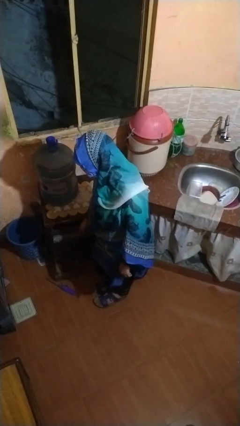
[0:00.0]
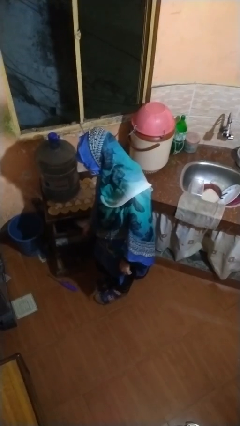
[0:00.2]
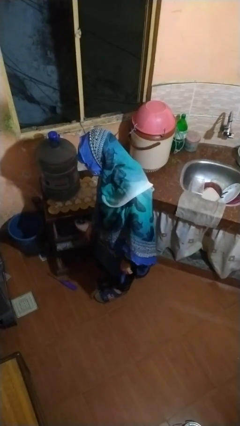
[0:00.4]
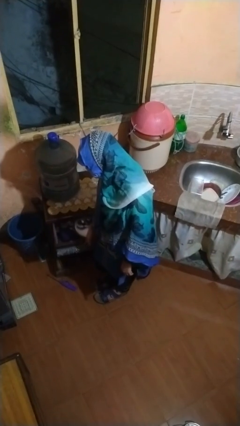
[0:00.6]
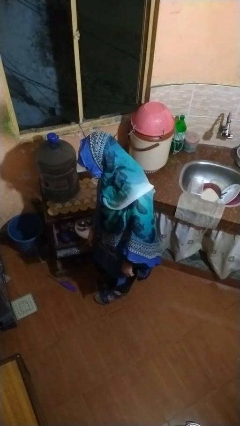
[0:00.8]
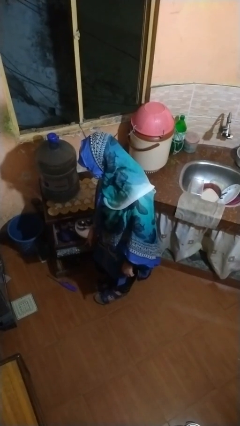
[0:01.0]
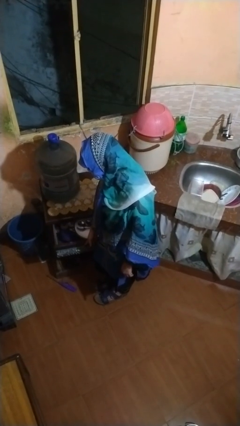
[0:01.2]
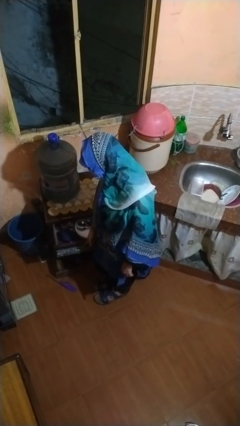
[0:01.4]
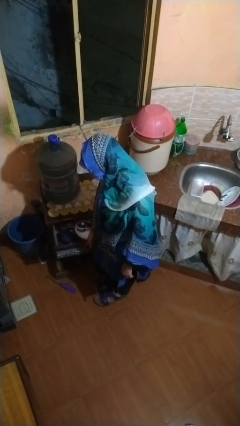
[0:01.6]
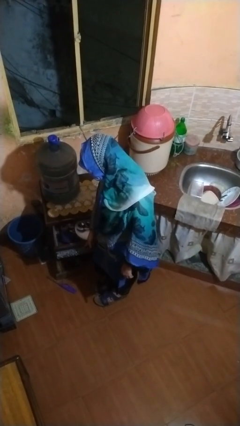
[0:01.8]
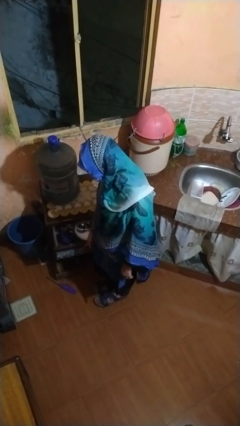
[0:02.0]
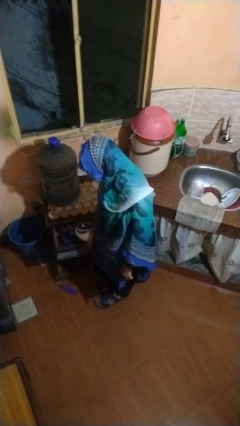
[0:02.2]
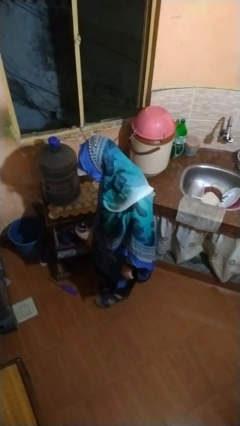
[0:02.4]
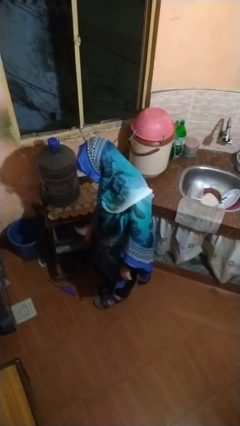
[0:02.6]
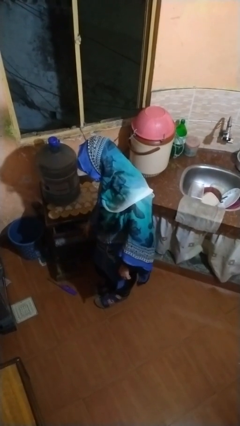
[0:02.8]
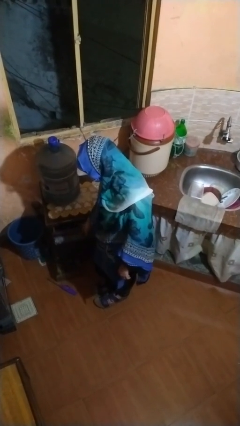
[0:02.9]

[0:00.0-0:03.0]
person opens kitchen drawer

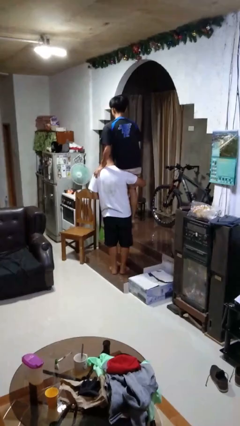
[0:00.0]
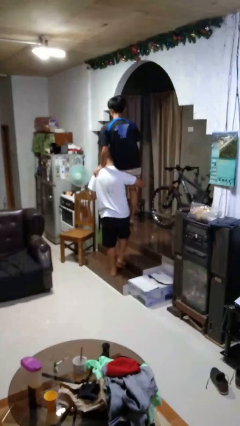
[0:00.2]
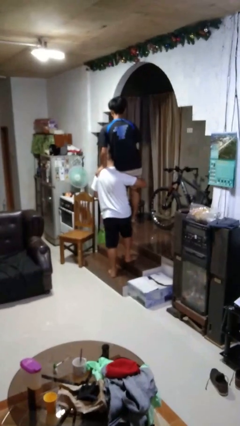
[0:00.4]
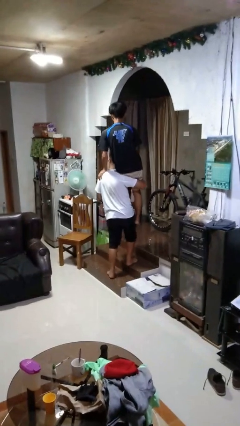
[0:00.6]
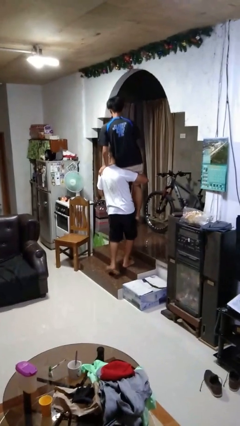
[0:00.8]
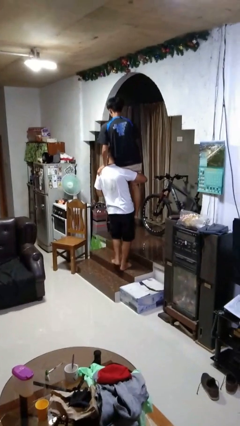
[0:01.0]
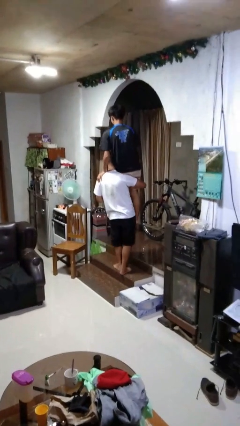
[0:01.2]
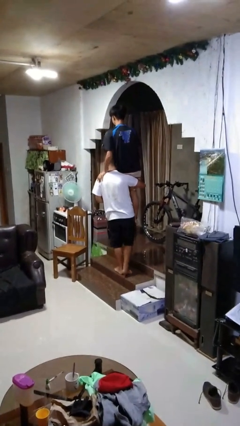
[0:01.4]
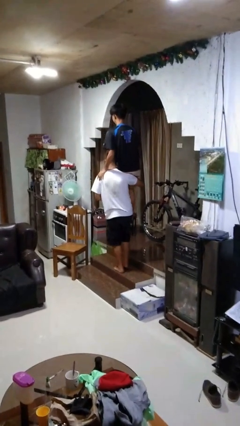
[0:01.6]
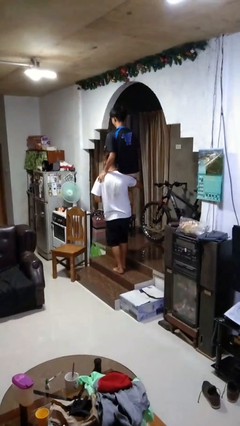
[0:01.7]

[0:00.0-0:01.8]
person carries person on shoulders

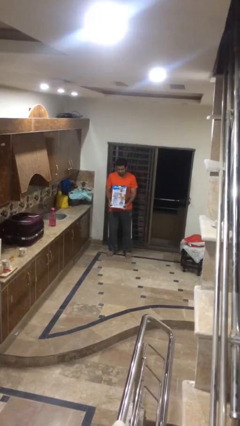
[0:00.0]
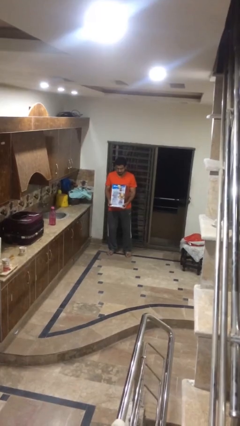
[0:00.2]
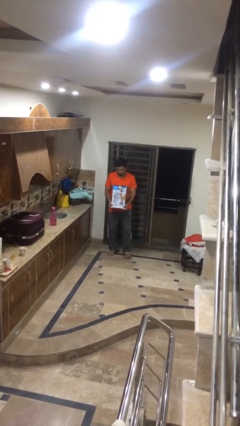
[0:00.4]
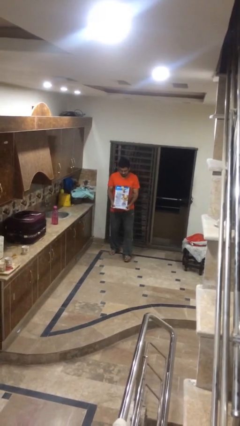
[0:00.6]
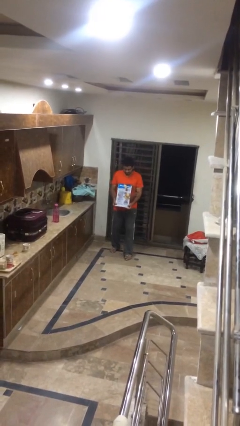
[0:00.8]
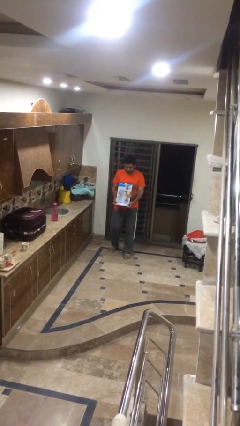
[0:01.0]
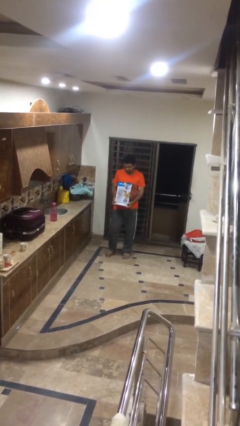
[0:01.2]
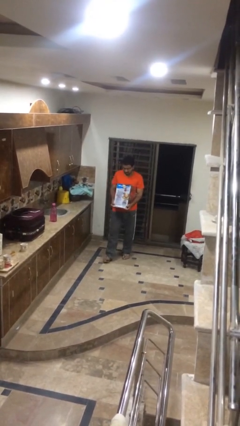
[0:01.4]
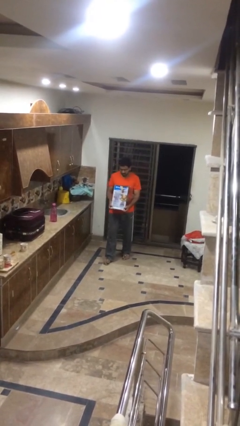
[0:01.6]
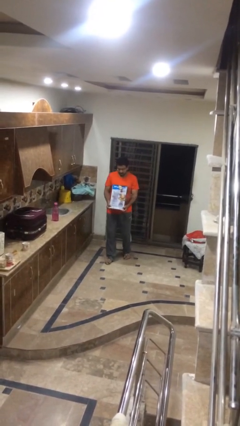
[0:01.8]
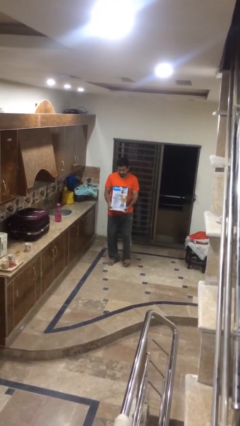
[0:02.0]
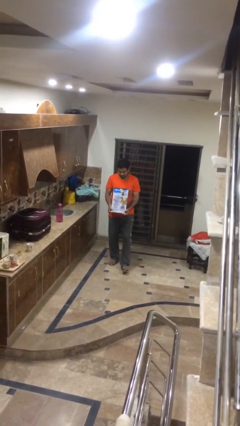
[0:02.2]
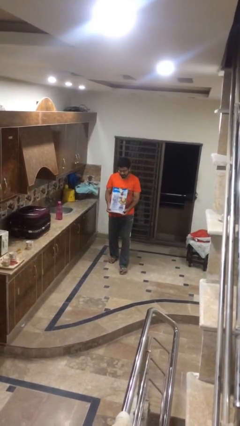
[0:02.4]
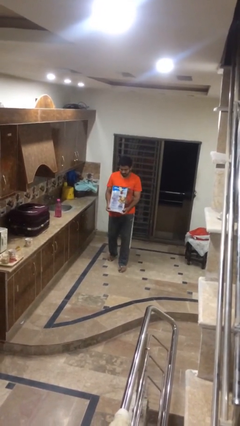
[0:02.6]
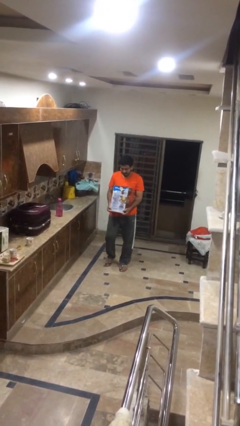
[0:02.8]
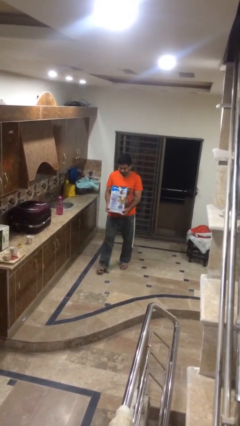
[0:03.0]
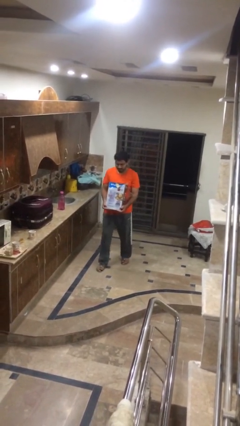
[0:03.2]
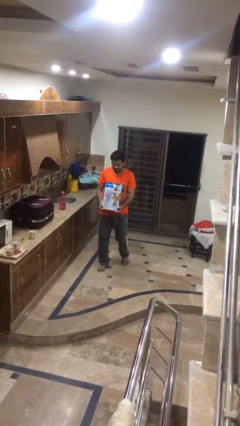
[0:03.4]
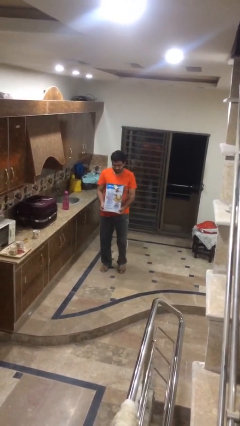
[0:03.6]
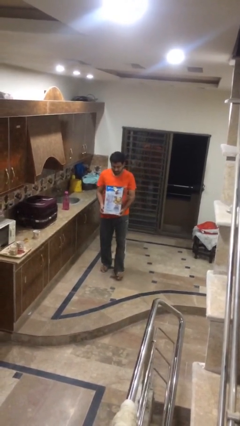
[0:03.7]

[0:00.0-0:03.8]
person carries heavy object

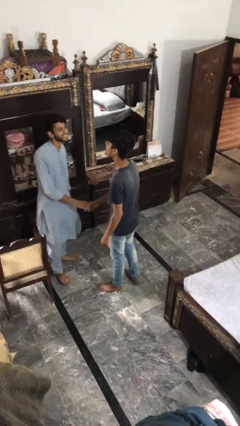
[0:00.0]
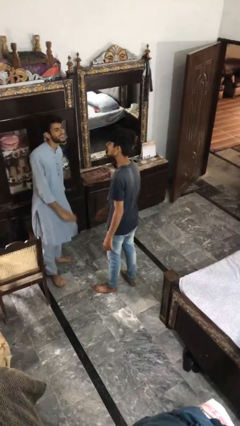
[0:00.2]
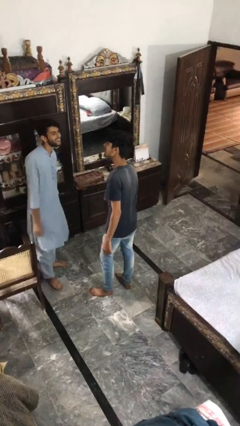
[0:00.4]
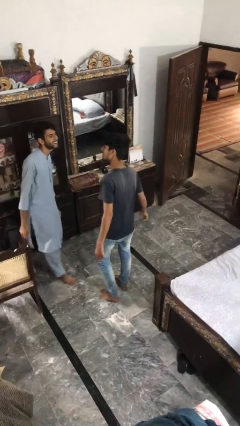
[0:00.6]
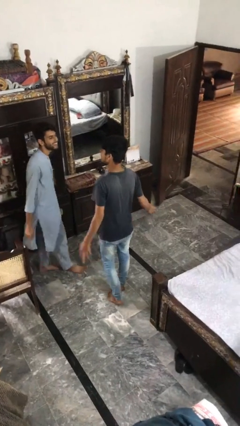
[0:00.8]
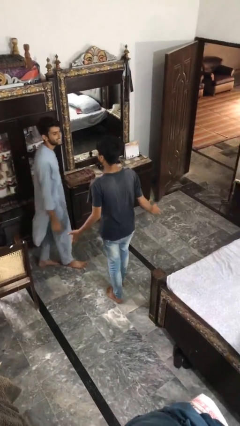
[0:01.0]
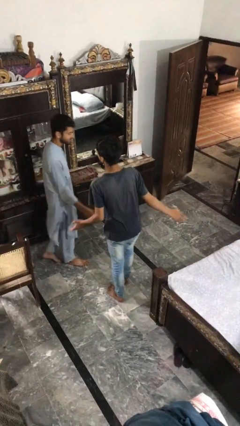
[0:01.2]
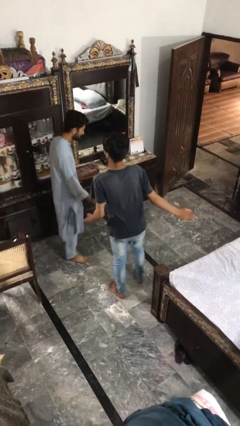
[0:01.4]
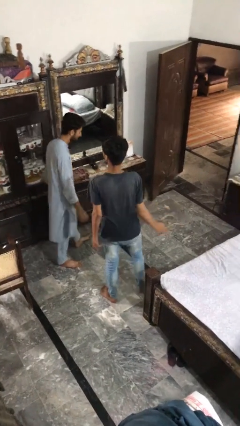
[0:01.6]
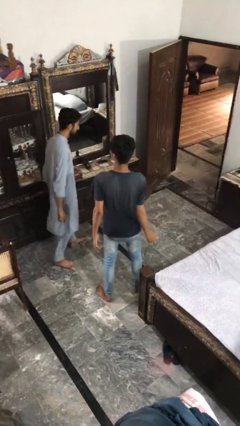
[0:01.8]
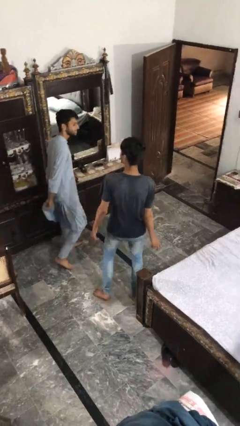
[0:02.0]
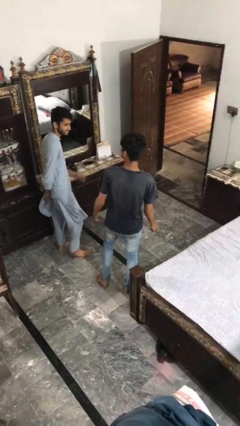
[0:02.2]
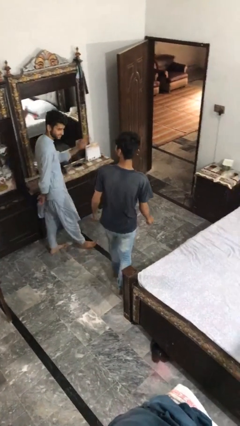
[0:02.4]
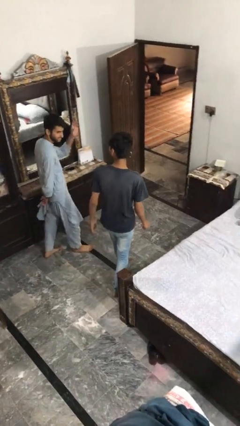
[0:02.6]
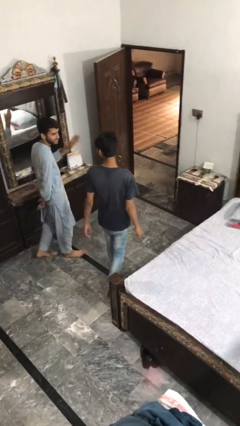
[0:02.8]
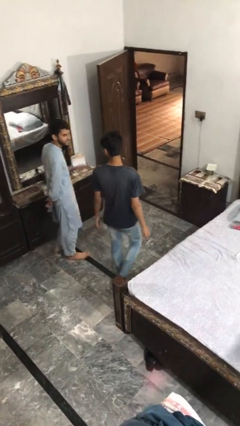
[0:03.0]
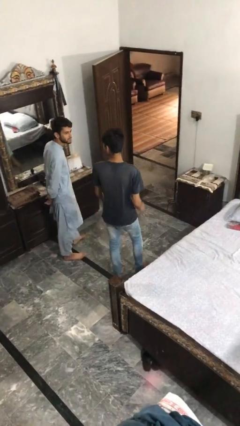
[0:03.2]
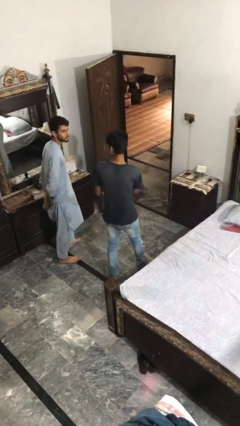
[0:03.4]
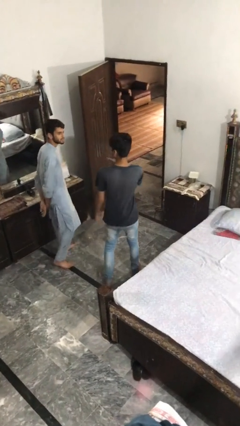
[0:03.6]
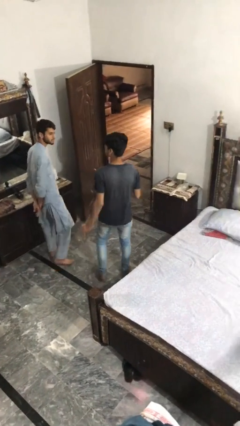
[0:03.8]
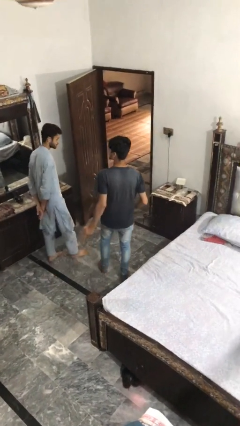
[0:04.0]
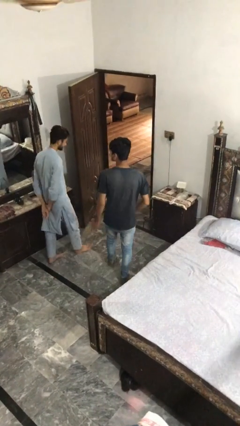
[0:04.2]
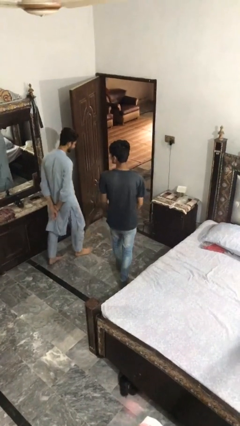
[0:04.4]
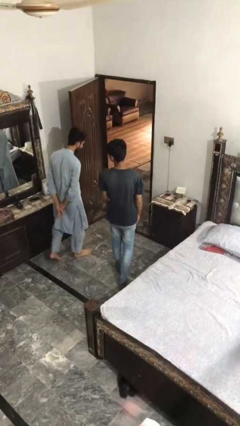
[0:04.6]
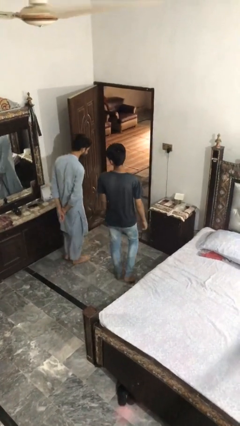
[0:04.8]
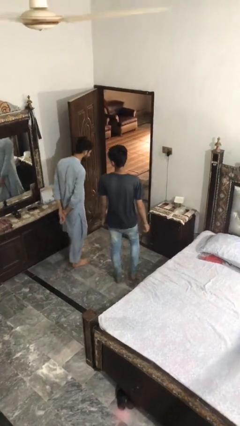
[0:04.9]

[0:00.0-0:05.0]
person talks to person

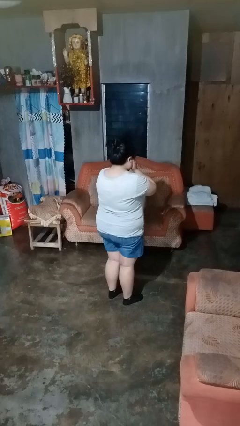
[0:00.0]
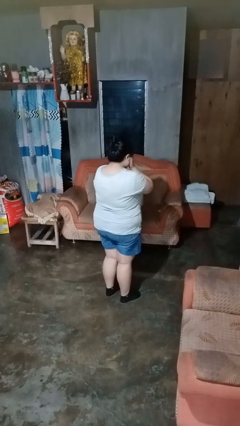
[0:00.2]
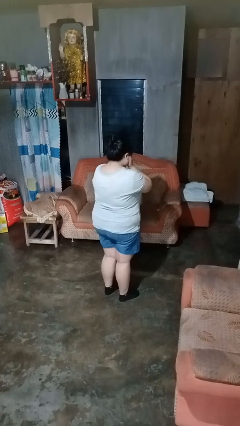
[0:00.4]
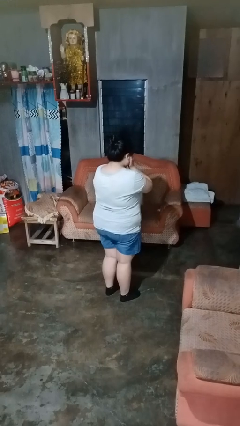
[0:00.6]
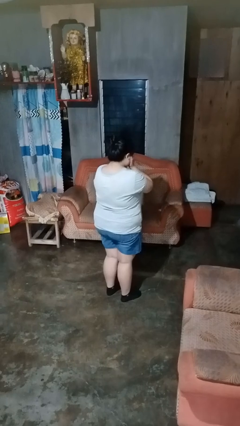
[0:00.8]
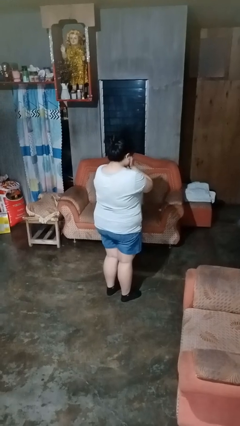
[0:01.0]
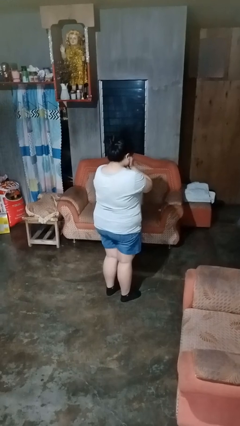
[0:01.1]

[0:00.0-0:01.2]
person covers face with hands

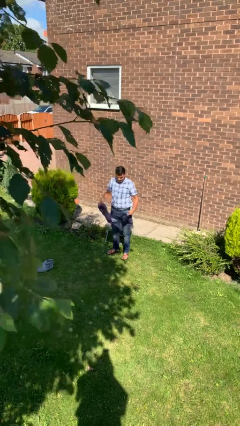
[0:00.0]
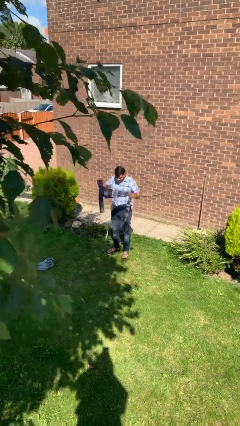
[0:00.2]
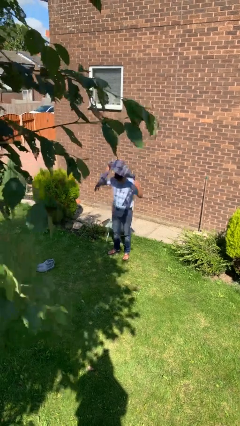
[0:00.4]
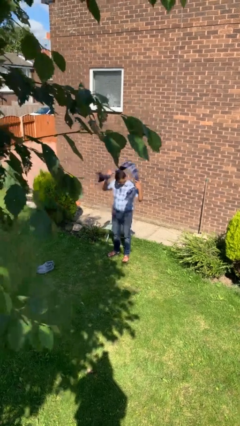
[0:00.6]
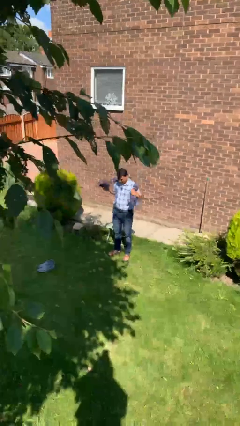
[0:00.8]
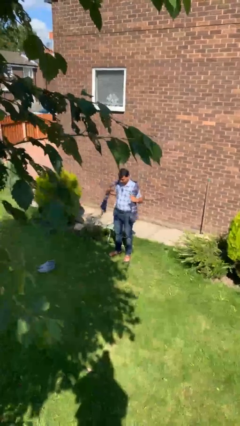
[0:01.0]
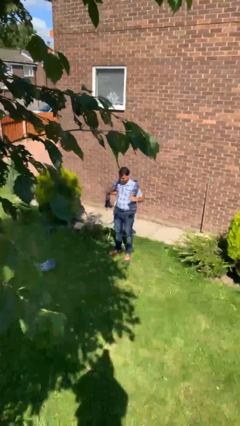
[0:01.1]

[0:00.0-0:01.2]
person puts on scarf

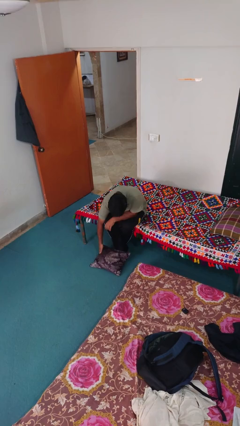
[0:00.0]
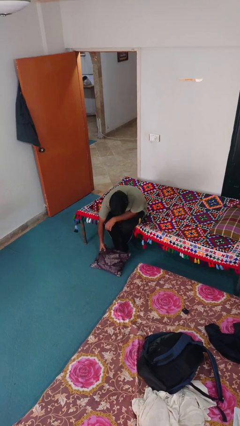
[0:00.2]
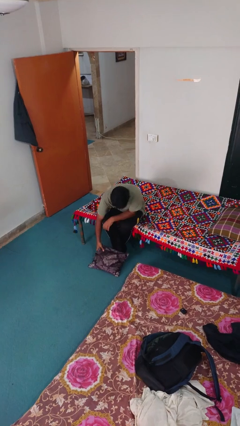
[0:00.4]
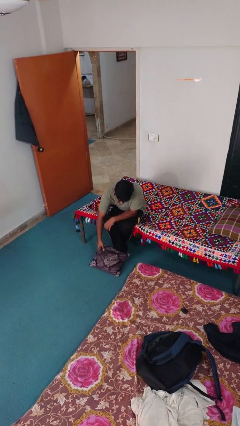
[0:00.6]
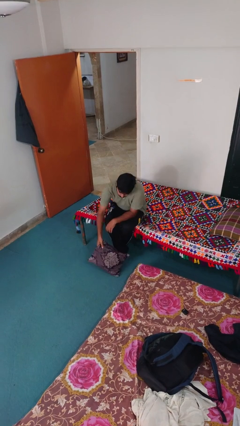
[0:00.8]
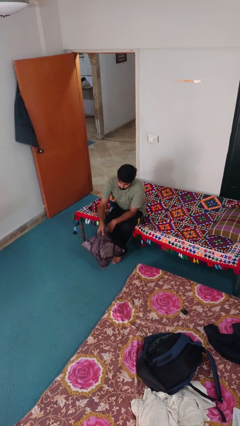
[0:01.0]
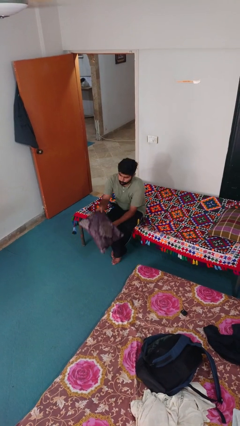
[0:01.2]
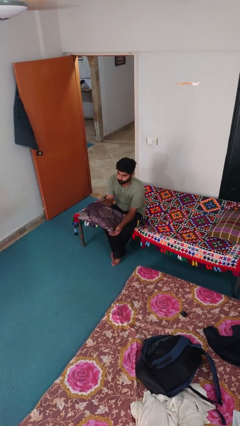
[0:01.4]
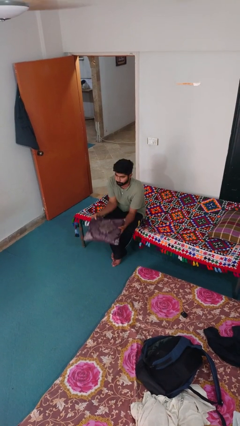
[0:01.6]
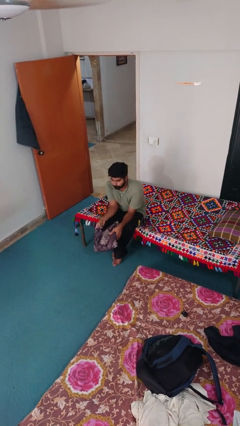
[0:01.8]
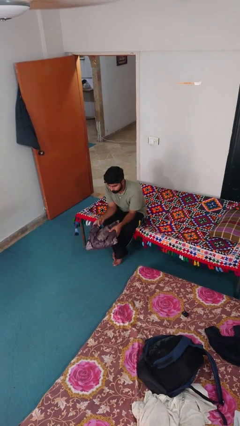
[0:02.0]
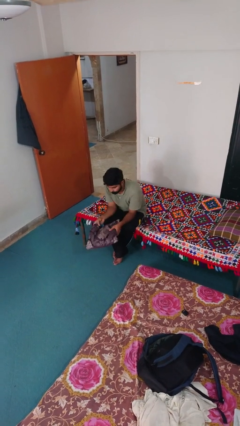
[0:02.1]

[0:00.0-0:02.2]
person picks up object from floor
